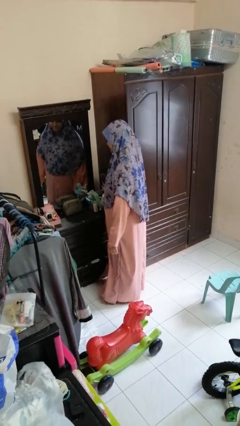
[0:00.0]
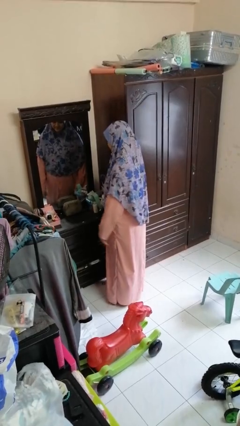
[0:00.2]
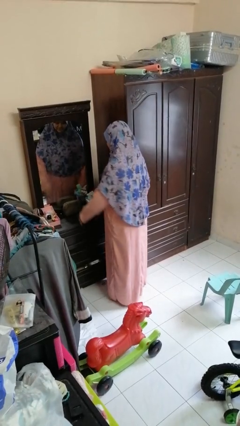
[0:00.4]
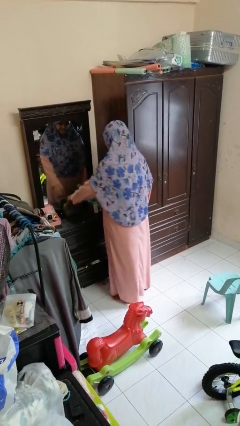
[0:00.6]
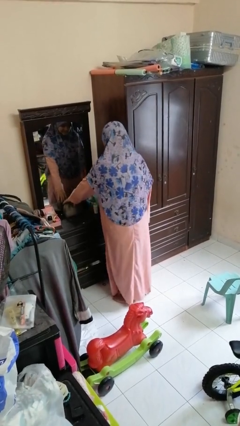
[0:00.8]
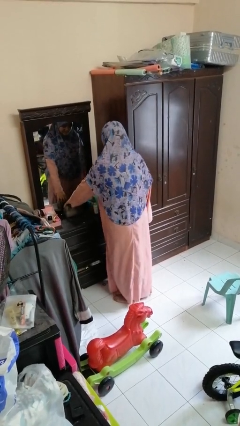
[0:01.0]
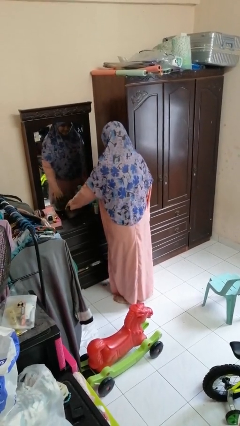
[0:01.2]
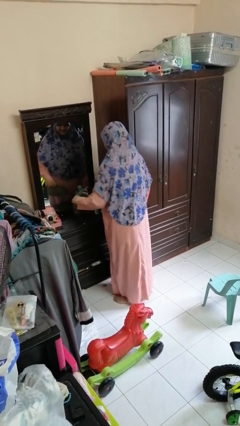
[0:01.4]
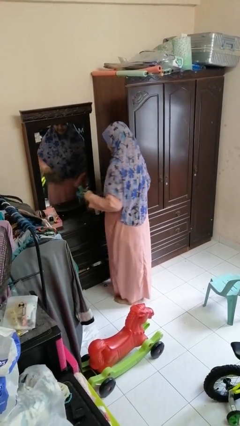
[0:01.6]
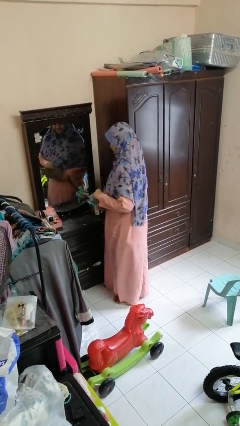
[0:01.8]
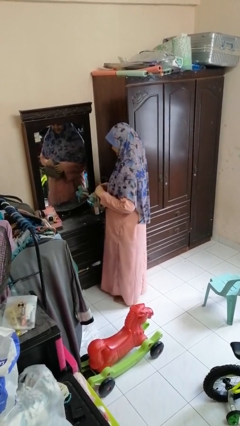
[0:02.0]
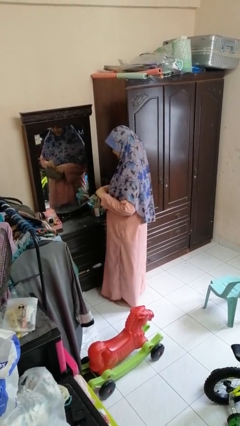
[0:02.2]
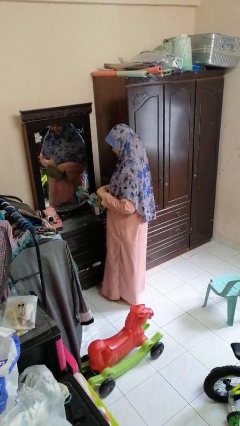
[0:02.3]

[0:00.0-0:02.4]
person picks up object from countertop

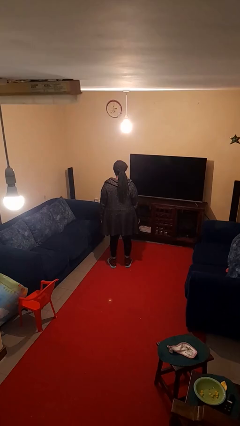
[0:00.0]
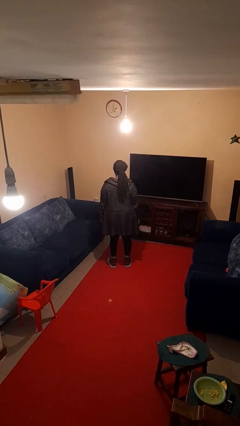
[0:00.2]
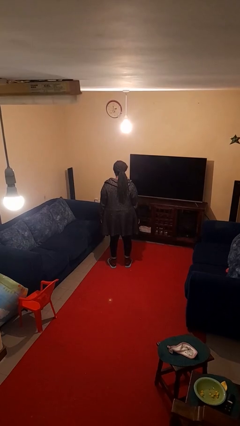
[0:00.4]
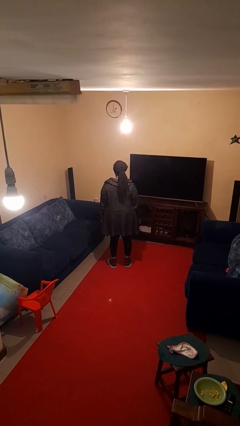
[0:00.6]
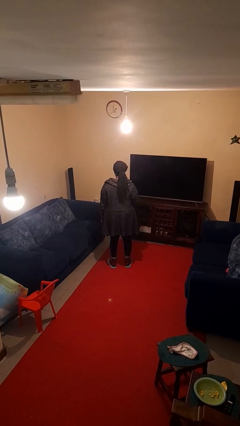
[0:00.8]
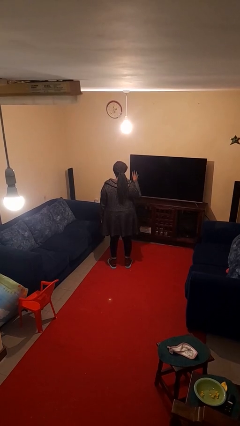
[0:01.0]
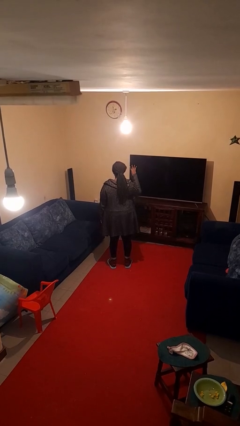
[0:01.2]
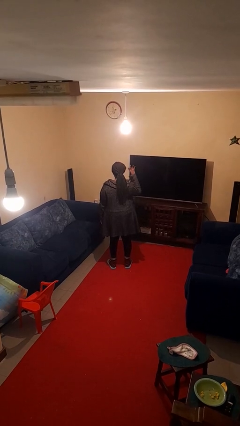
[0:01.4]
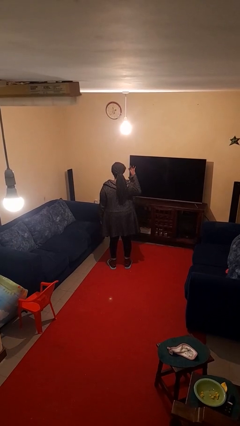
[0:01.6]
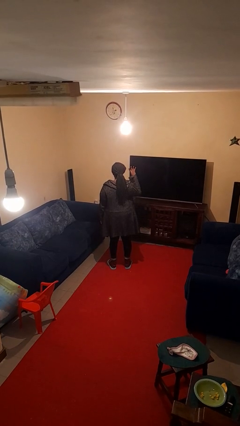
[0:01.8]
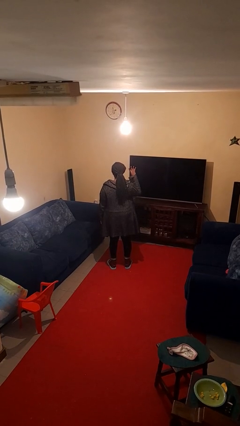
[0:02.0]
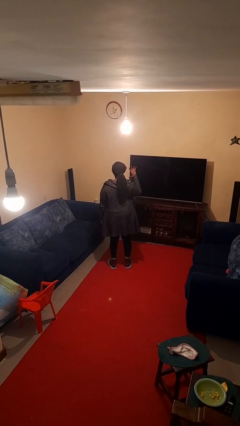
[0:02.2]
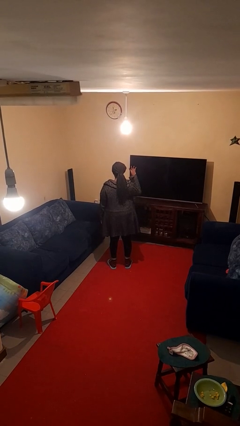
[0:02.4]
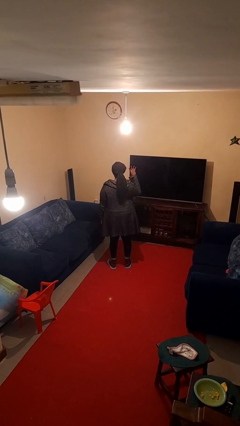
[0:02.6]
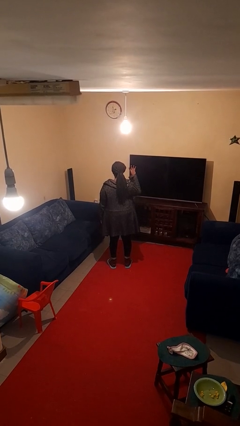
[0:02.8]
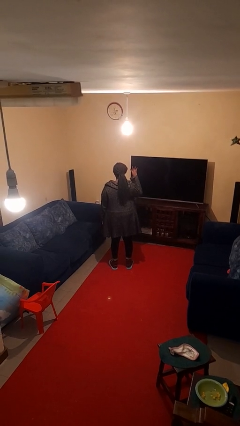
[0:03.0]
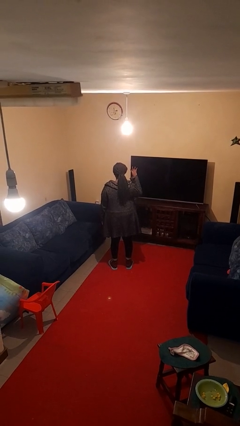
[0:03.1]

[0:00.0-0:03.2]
person gestures number four

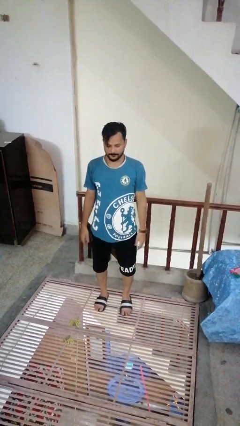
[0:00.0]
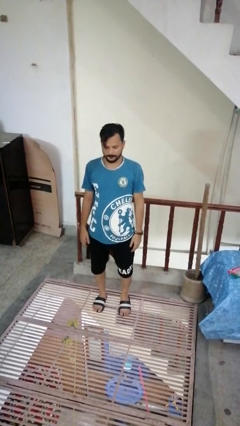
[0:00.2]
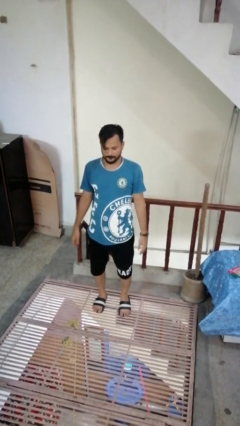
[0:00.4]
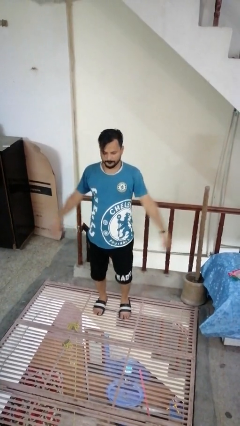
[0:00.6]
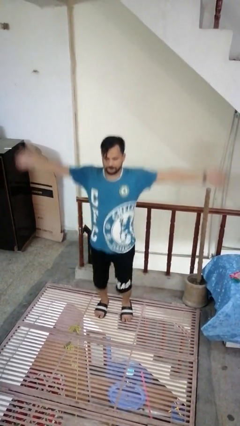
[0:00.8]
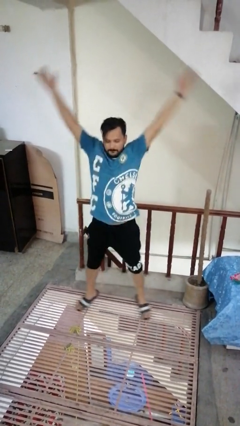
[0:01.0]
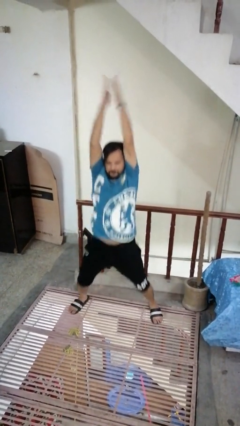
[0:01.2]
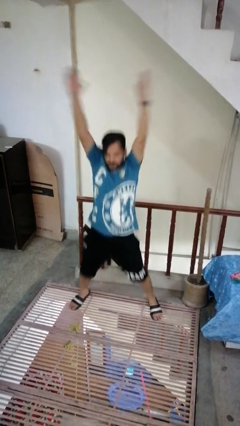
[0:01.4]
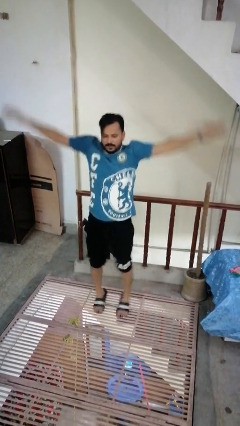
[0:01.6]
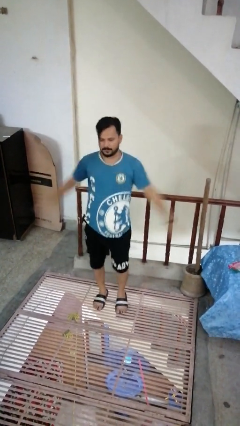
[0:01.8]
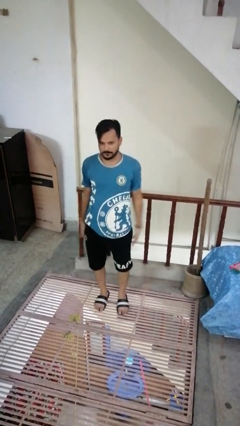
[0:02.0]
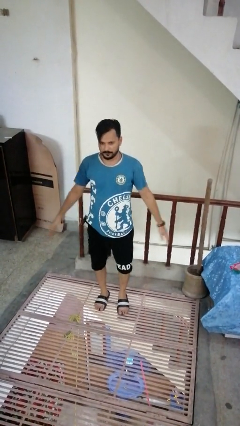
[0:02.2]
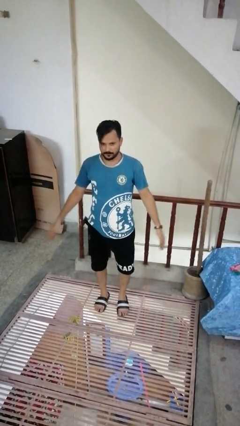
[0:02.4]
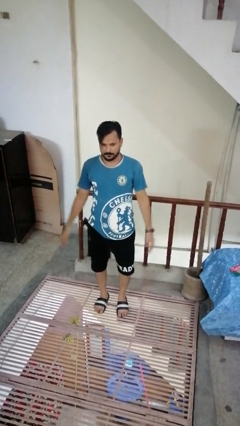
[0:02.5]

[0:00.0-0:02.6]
person exercises with jumping jacks

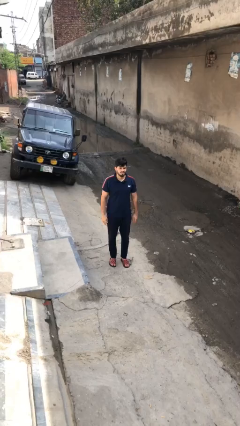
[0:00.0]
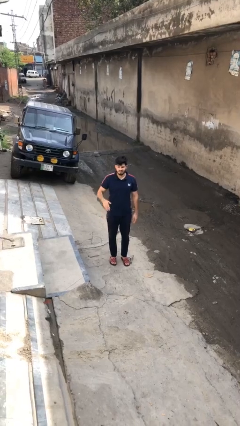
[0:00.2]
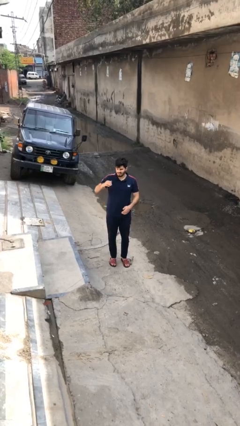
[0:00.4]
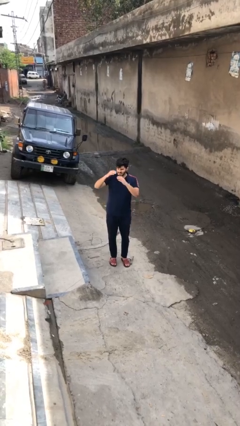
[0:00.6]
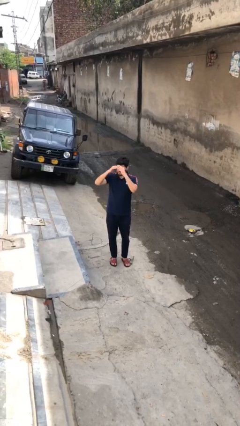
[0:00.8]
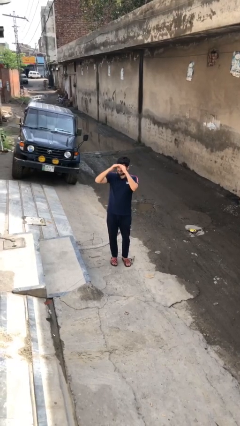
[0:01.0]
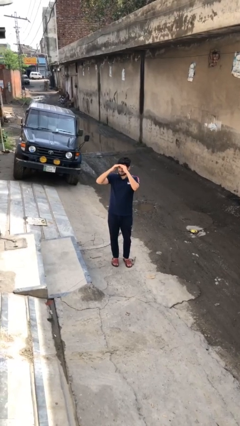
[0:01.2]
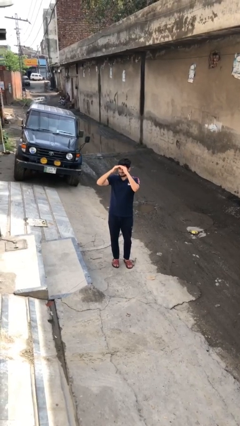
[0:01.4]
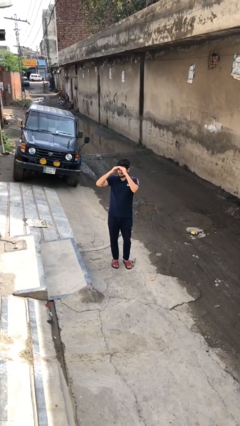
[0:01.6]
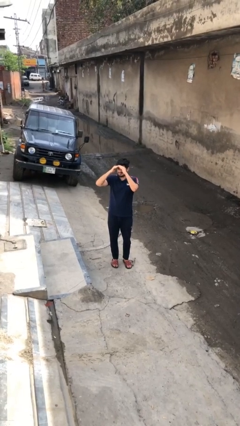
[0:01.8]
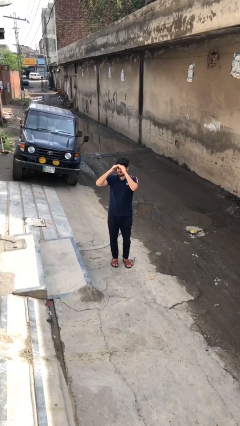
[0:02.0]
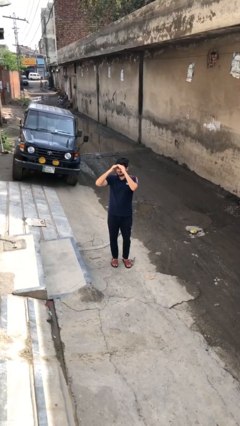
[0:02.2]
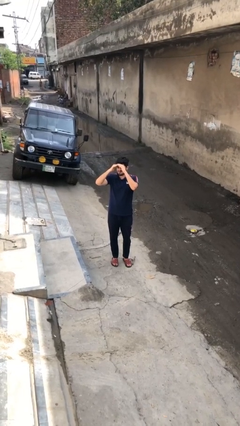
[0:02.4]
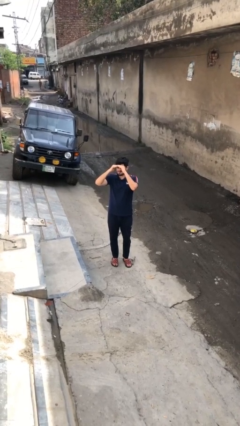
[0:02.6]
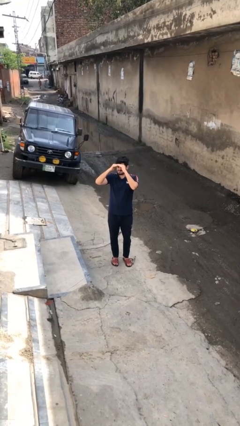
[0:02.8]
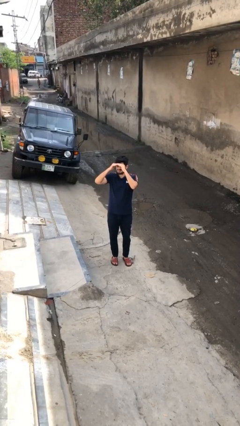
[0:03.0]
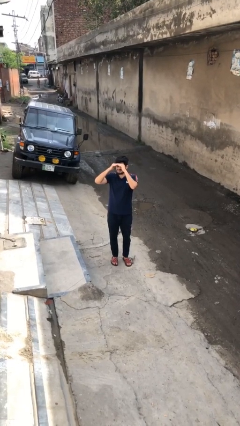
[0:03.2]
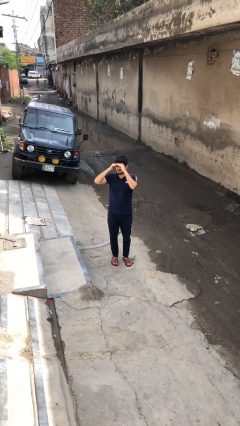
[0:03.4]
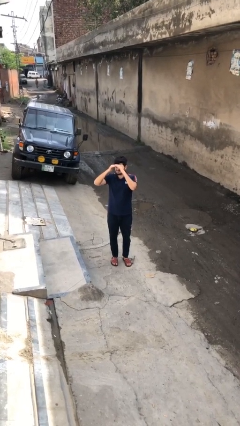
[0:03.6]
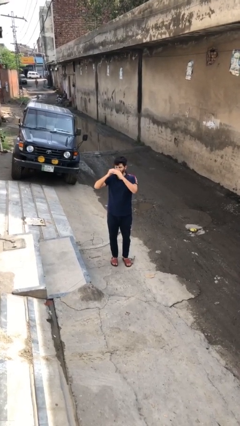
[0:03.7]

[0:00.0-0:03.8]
person shades eyes

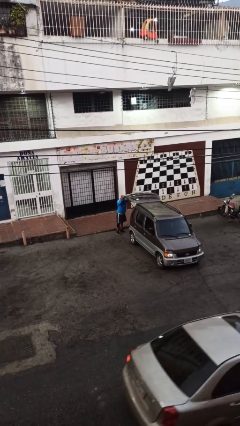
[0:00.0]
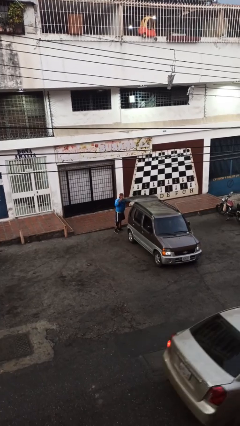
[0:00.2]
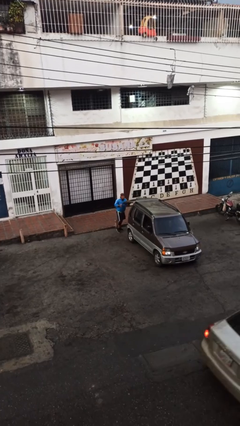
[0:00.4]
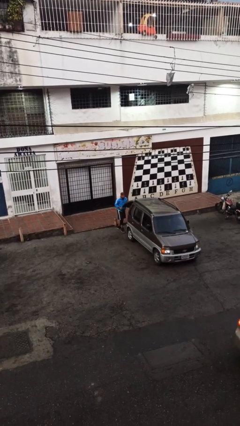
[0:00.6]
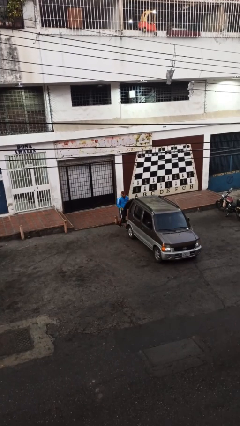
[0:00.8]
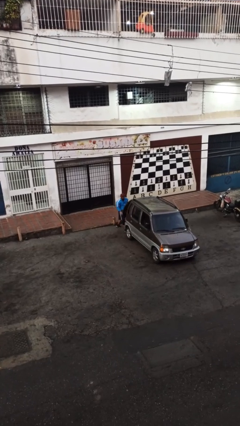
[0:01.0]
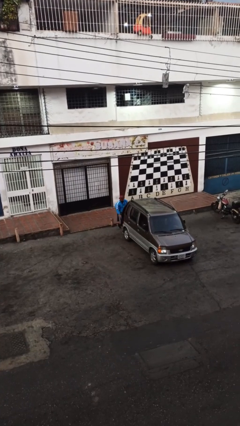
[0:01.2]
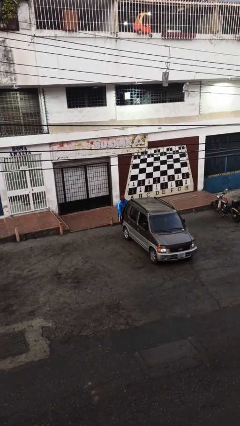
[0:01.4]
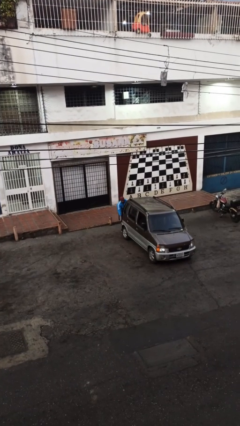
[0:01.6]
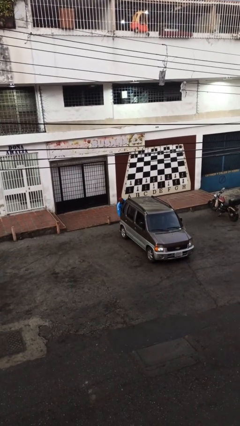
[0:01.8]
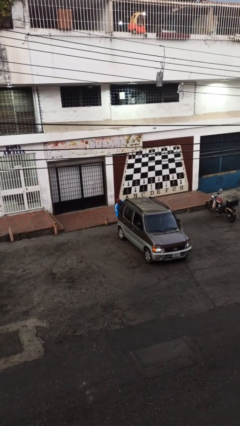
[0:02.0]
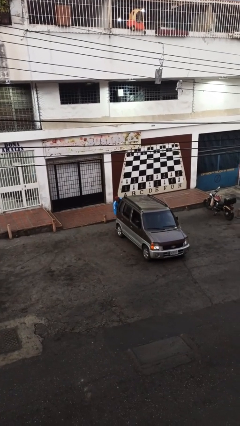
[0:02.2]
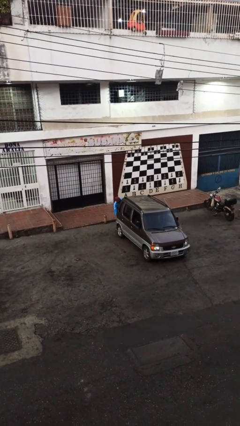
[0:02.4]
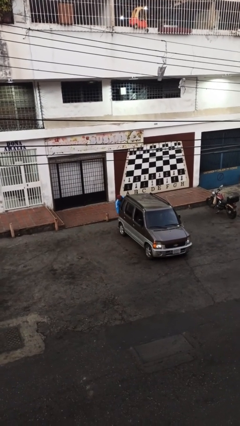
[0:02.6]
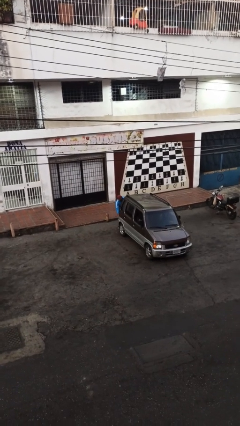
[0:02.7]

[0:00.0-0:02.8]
person closes car trunk

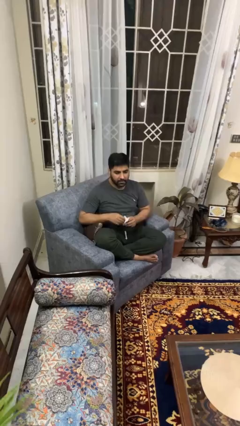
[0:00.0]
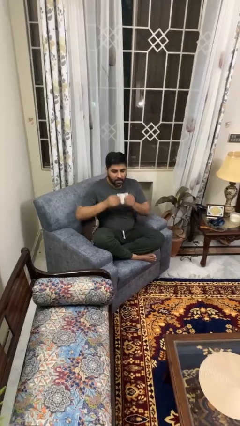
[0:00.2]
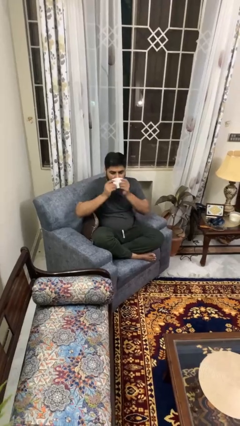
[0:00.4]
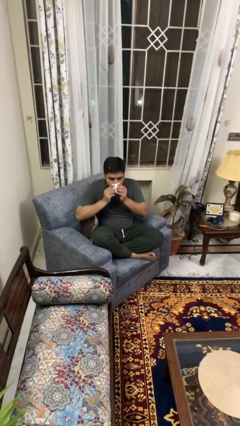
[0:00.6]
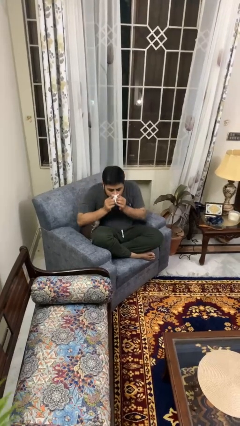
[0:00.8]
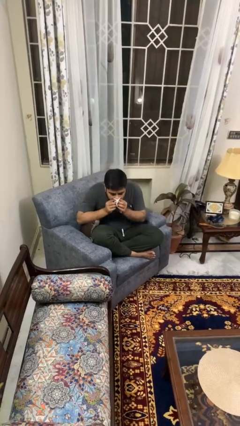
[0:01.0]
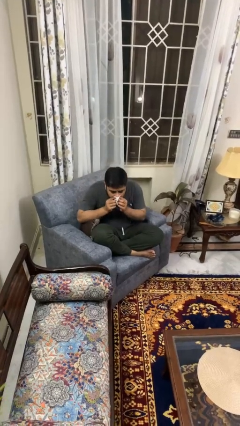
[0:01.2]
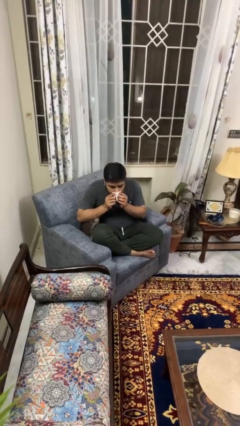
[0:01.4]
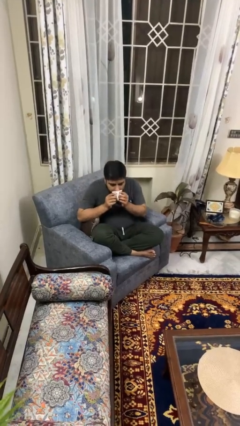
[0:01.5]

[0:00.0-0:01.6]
person blows nose

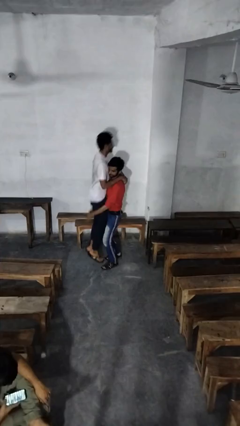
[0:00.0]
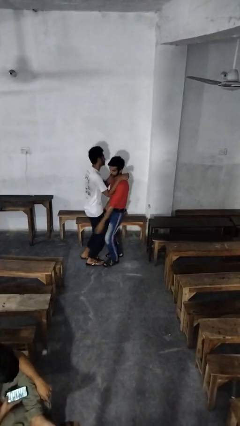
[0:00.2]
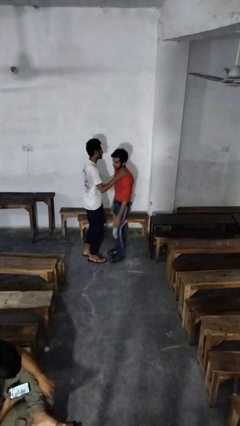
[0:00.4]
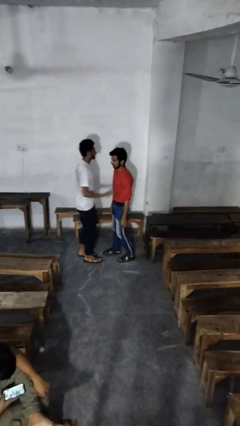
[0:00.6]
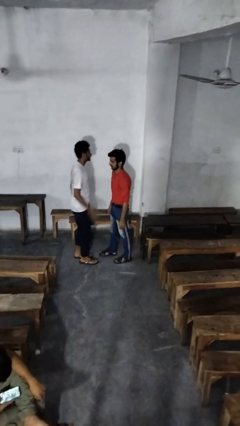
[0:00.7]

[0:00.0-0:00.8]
person puts down person
